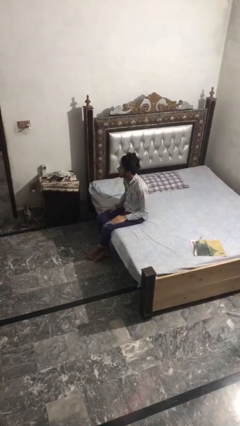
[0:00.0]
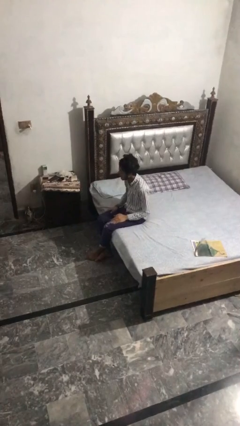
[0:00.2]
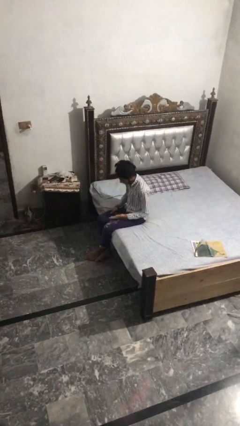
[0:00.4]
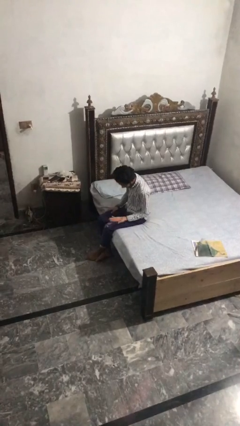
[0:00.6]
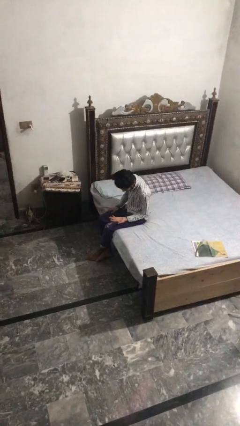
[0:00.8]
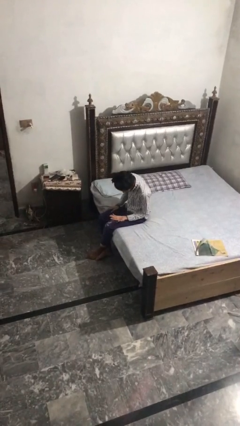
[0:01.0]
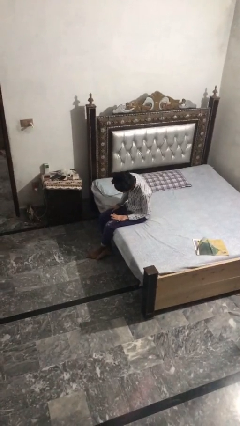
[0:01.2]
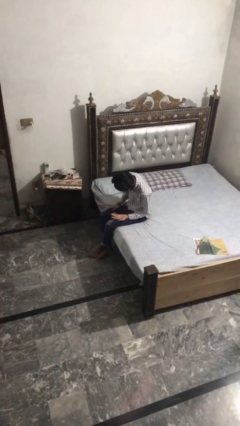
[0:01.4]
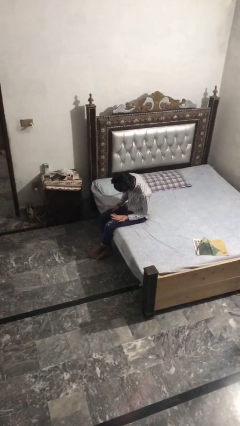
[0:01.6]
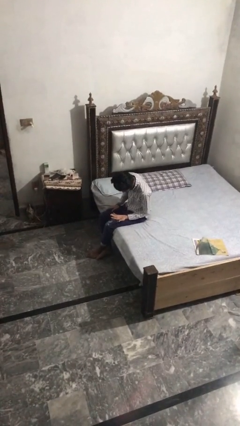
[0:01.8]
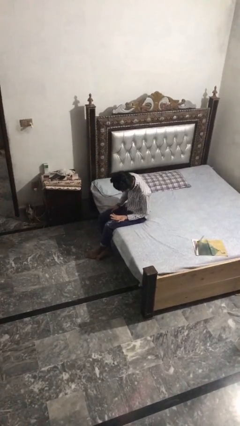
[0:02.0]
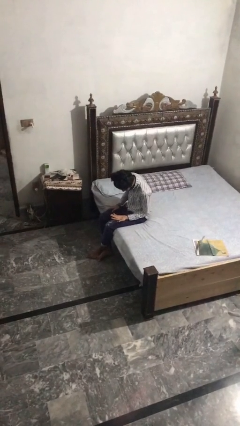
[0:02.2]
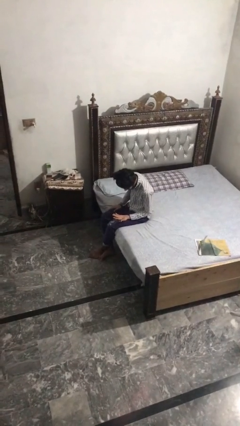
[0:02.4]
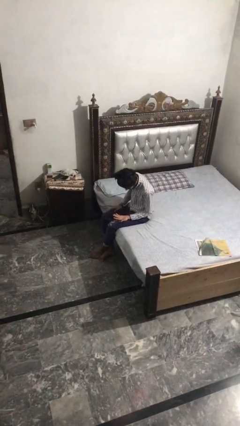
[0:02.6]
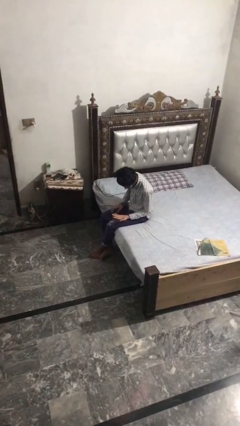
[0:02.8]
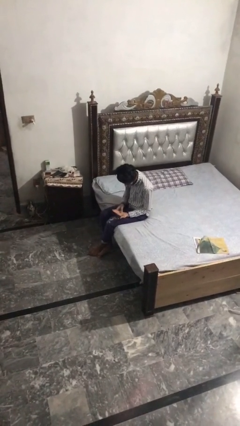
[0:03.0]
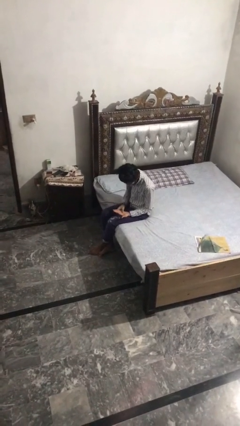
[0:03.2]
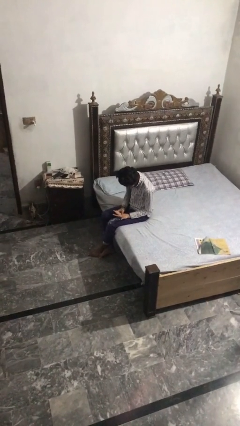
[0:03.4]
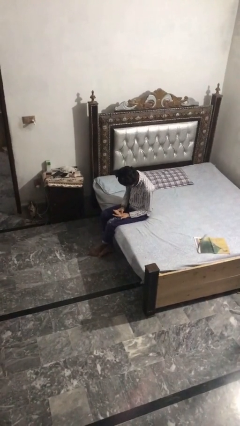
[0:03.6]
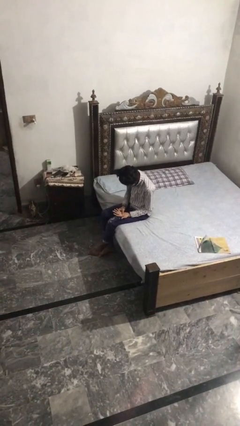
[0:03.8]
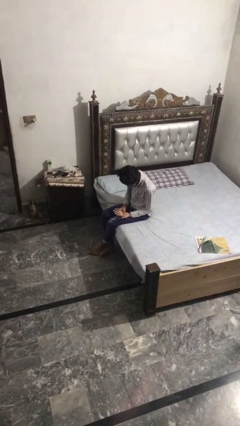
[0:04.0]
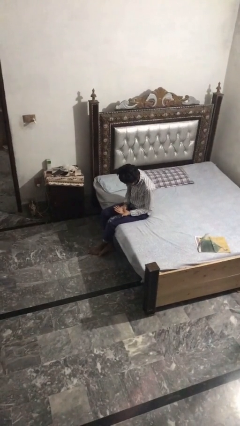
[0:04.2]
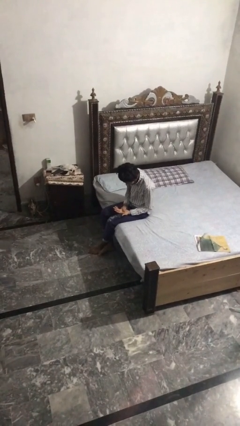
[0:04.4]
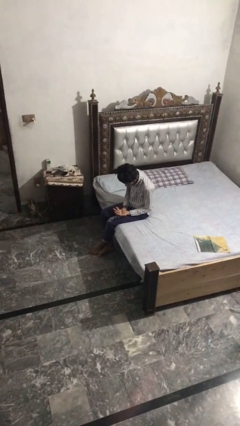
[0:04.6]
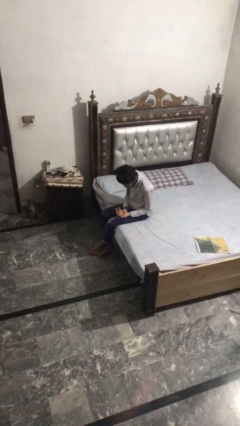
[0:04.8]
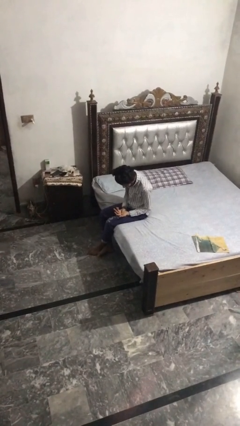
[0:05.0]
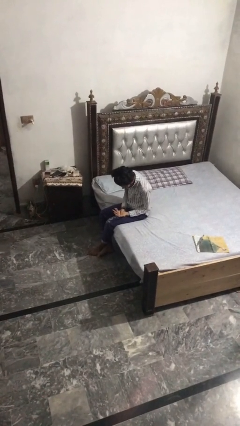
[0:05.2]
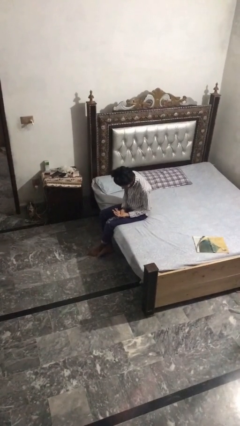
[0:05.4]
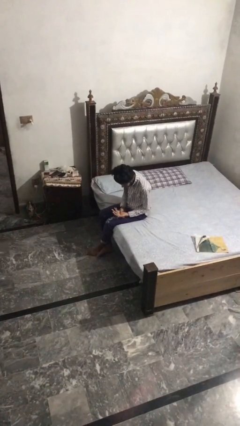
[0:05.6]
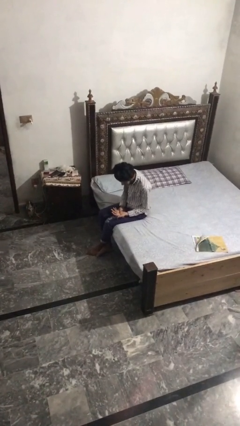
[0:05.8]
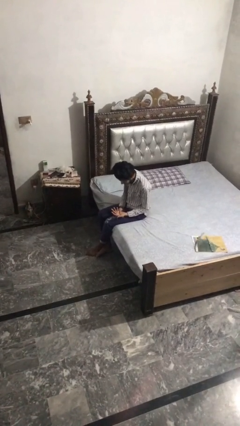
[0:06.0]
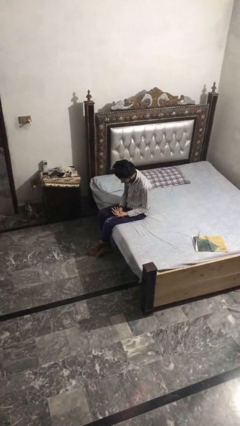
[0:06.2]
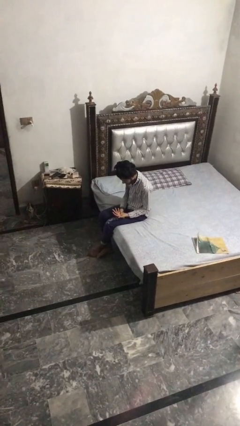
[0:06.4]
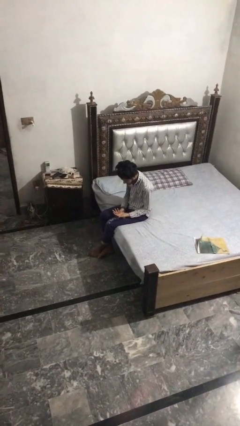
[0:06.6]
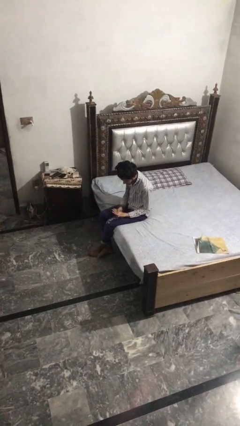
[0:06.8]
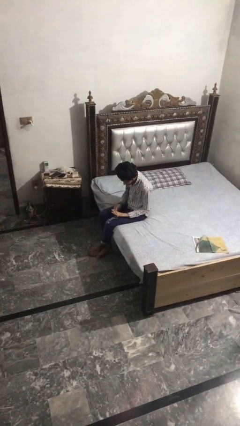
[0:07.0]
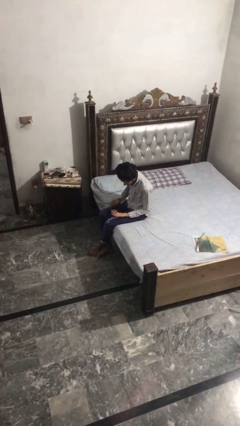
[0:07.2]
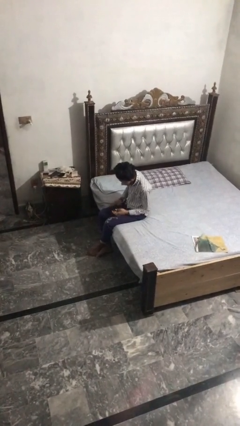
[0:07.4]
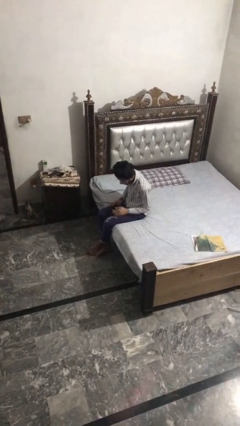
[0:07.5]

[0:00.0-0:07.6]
person looks at hands in lap

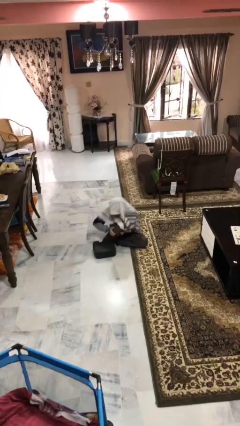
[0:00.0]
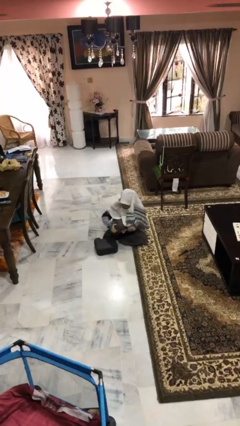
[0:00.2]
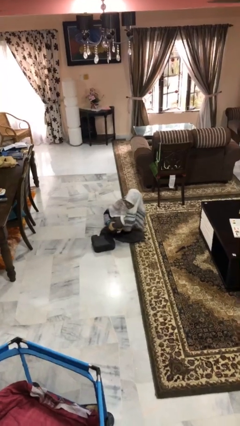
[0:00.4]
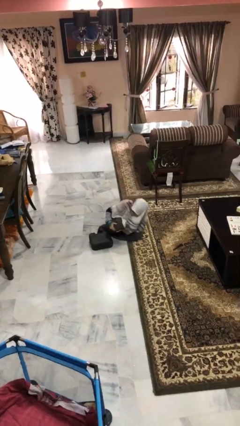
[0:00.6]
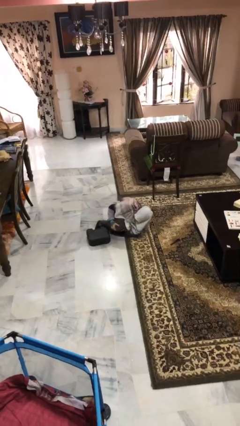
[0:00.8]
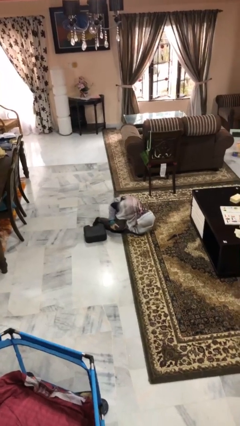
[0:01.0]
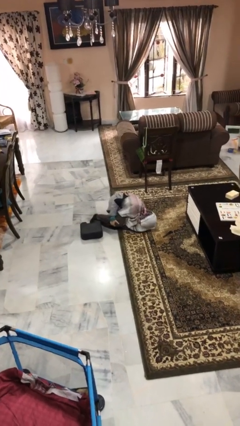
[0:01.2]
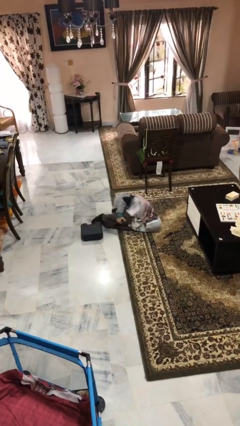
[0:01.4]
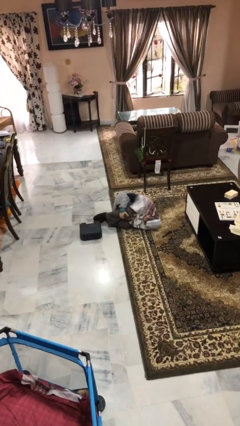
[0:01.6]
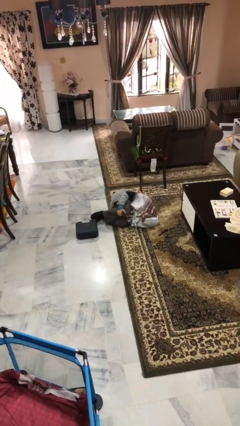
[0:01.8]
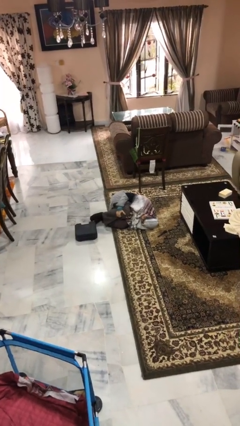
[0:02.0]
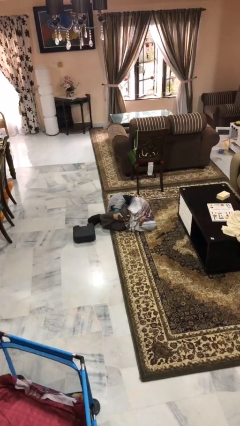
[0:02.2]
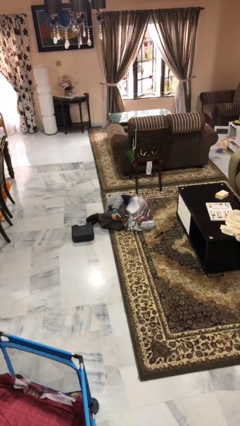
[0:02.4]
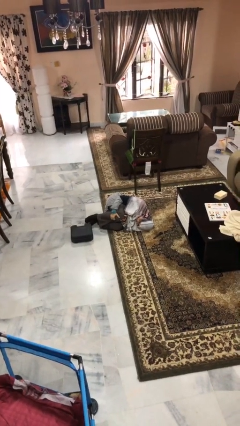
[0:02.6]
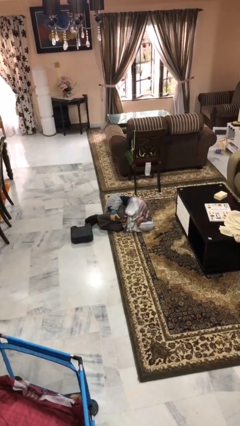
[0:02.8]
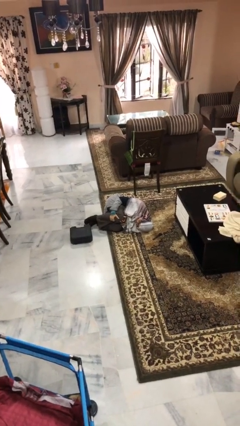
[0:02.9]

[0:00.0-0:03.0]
person lies down on floor

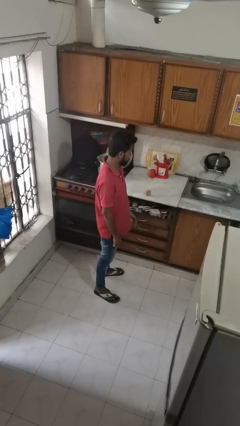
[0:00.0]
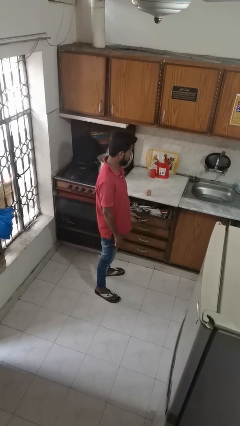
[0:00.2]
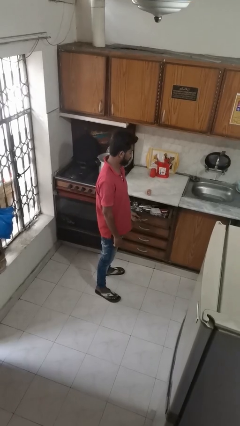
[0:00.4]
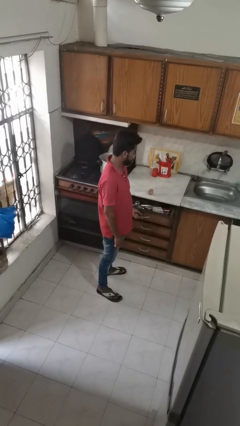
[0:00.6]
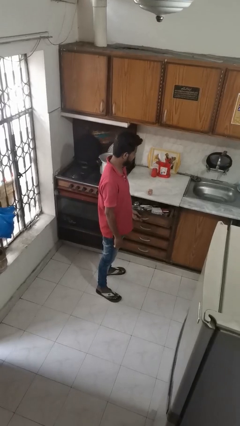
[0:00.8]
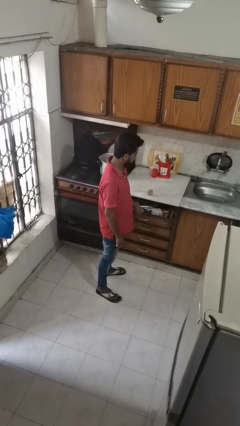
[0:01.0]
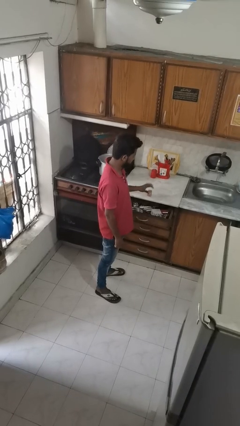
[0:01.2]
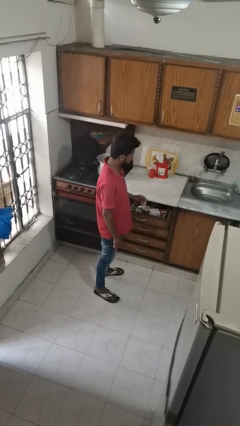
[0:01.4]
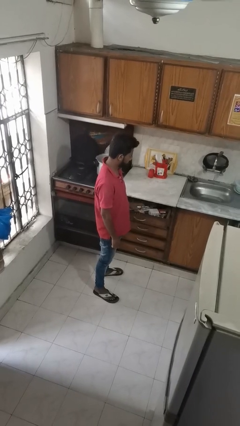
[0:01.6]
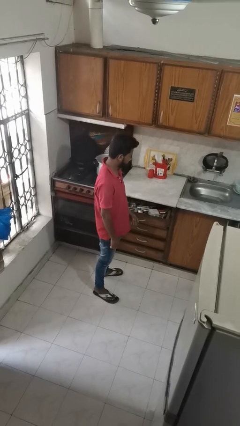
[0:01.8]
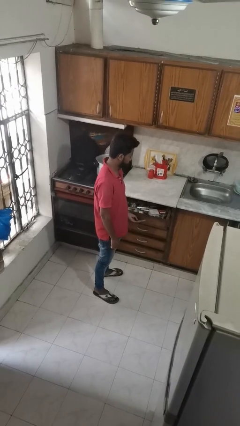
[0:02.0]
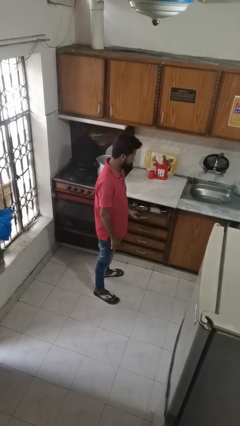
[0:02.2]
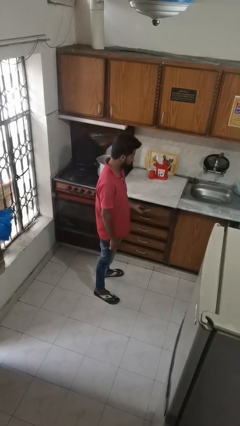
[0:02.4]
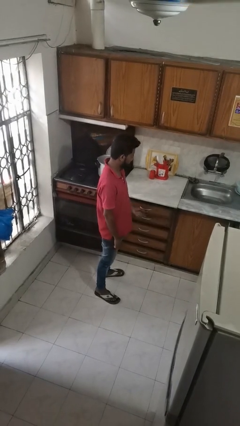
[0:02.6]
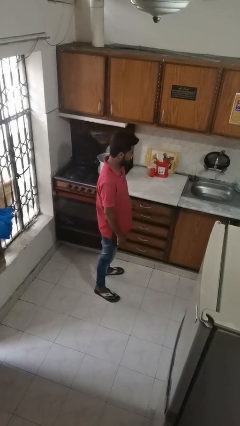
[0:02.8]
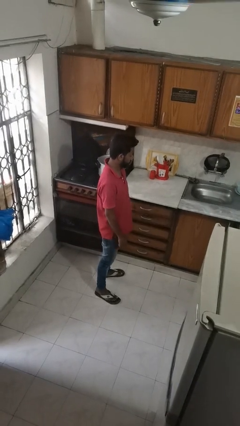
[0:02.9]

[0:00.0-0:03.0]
person puts object into kitchen drawer

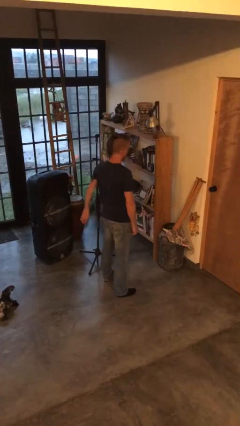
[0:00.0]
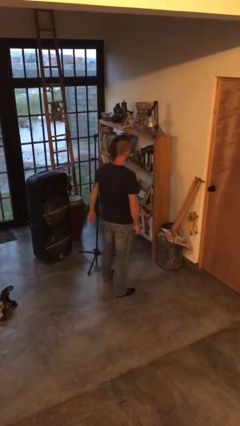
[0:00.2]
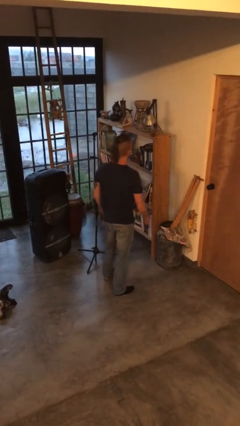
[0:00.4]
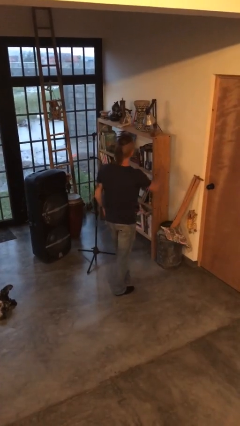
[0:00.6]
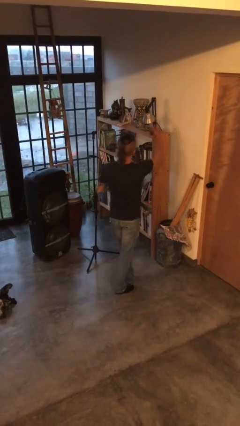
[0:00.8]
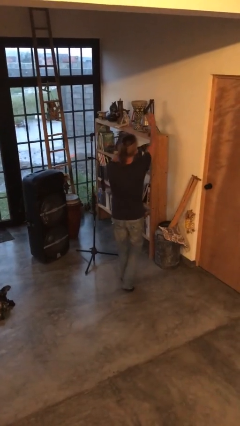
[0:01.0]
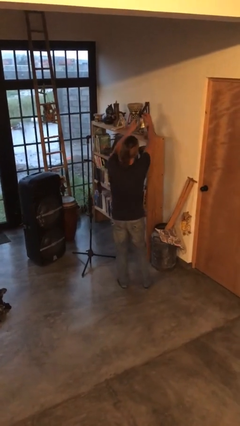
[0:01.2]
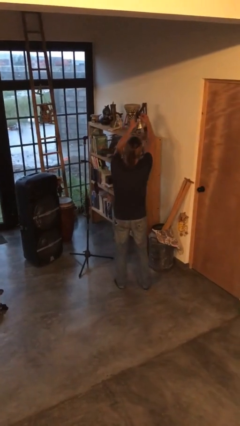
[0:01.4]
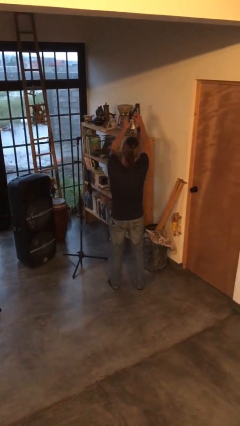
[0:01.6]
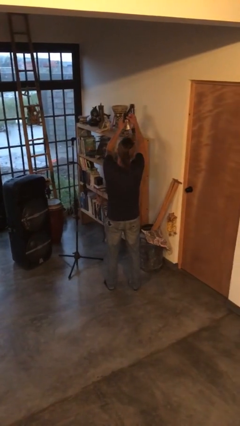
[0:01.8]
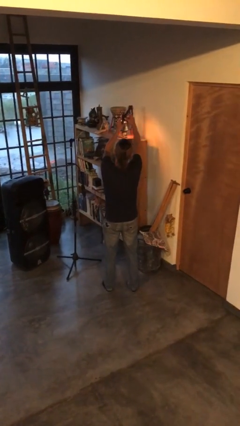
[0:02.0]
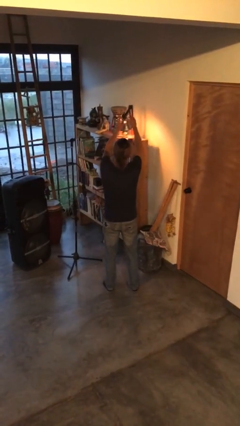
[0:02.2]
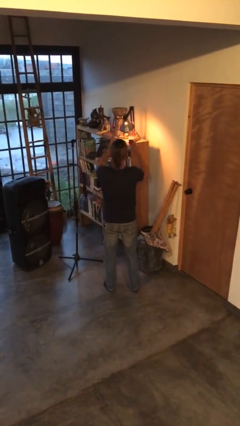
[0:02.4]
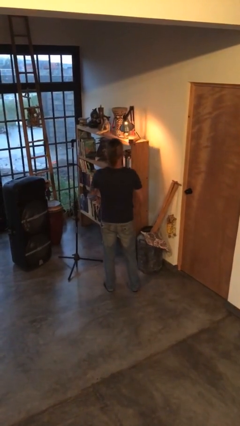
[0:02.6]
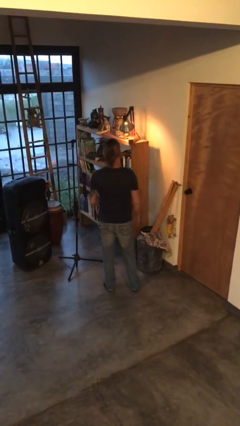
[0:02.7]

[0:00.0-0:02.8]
person turns on lamp

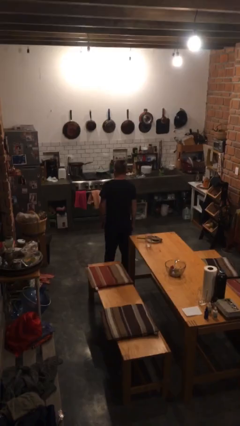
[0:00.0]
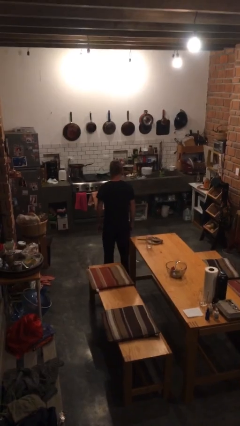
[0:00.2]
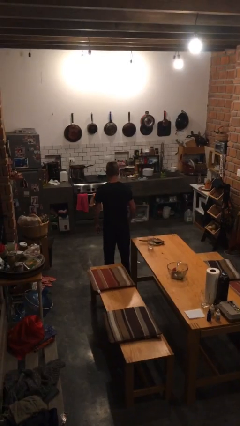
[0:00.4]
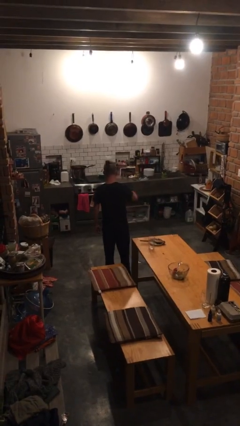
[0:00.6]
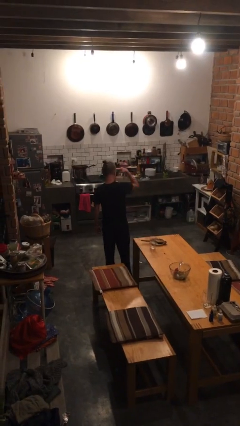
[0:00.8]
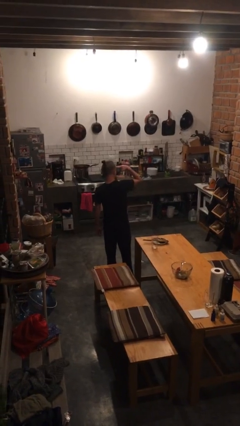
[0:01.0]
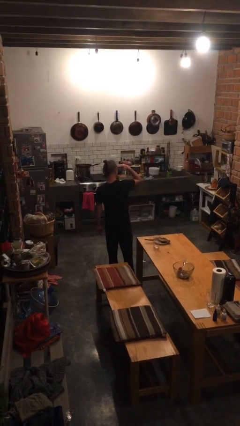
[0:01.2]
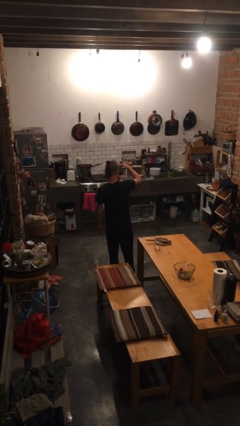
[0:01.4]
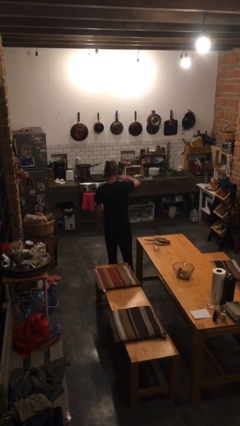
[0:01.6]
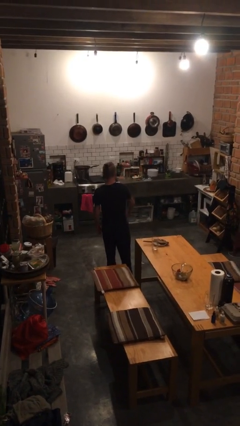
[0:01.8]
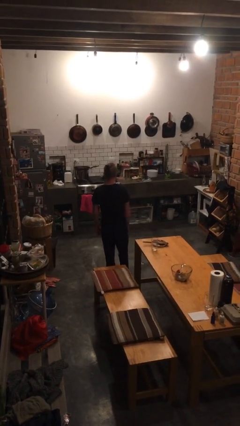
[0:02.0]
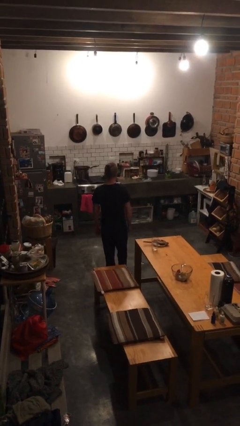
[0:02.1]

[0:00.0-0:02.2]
person salutes
